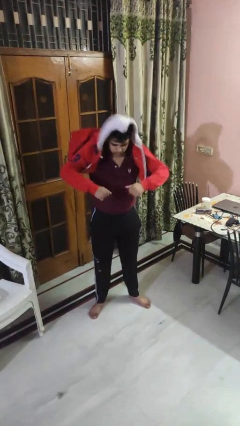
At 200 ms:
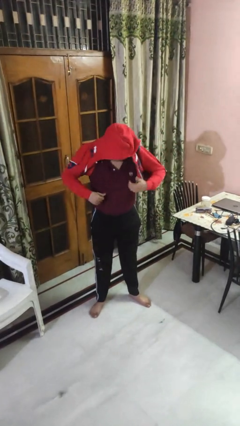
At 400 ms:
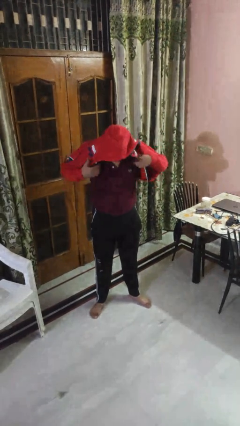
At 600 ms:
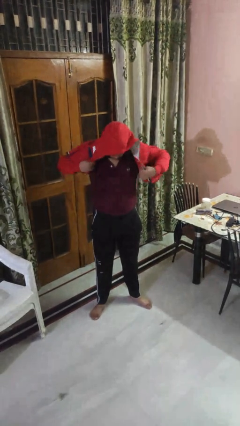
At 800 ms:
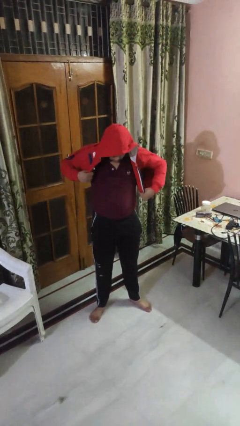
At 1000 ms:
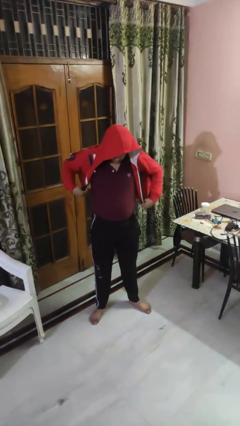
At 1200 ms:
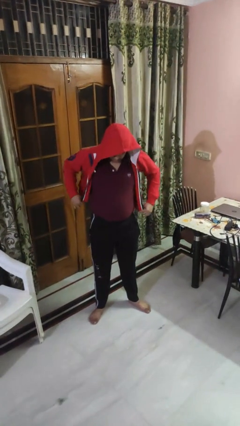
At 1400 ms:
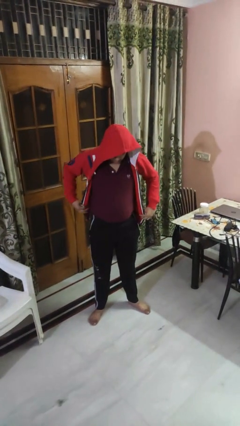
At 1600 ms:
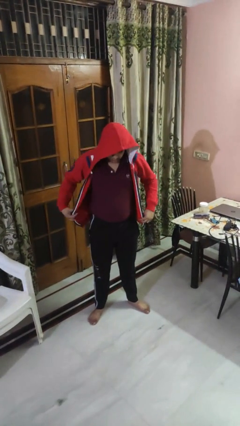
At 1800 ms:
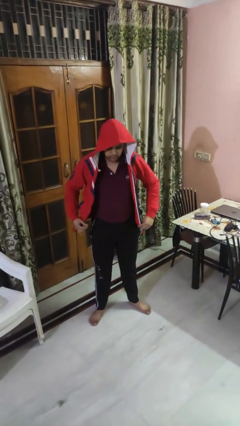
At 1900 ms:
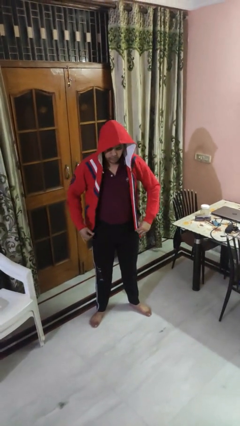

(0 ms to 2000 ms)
person puts on hoodie

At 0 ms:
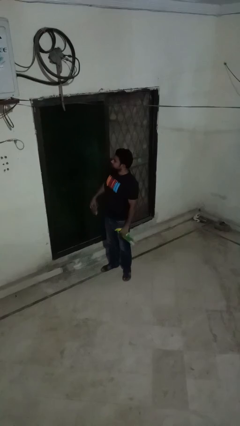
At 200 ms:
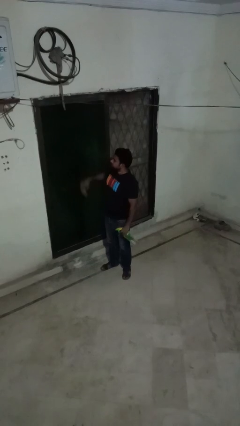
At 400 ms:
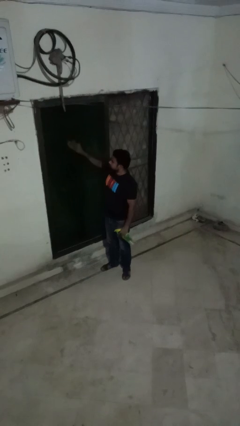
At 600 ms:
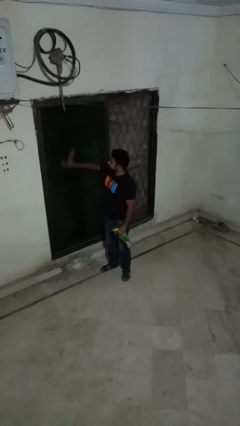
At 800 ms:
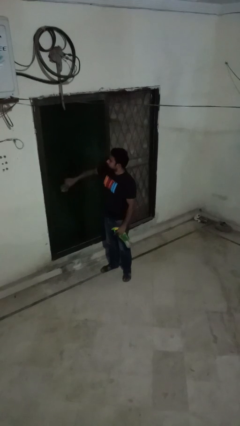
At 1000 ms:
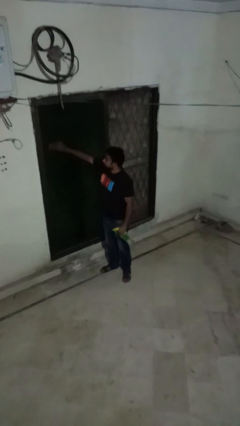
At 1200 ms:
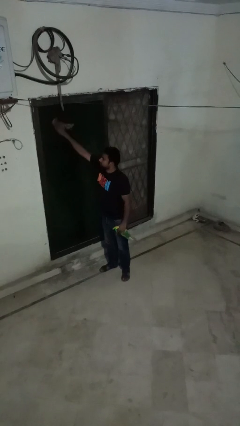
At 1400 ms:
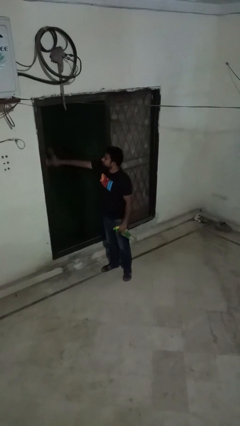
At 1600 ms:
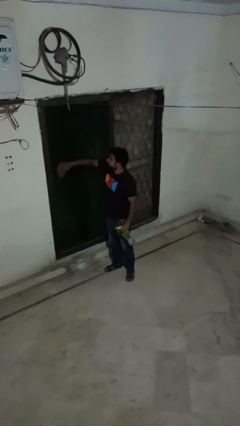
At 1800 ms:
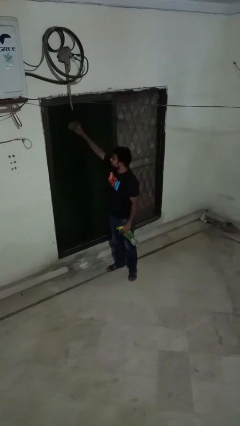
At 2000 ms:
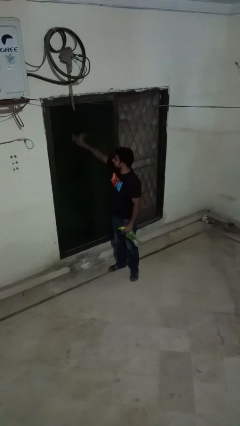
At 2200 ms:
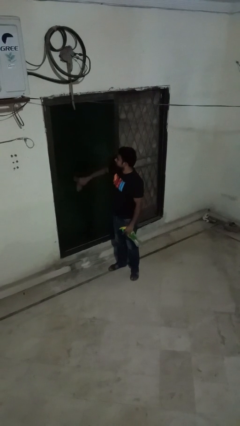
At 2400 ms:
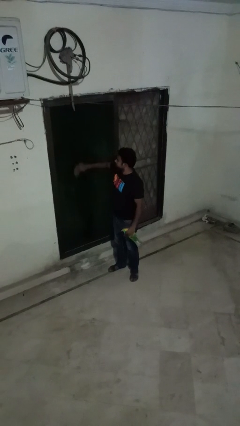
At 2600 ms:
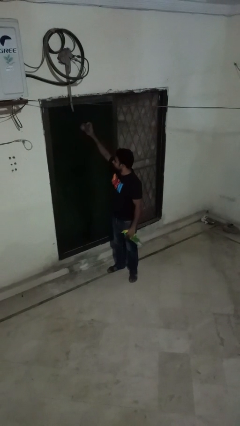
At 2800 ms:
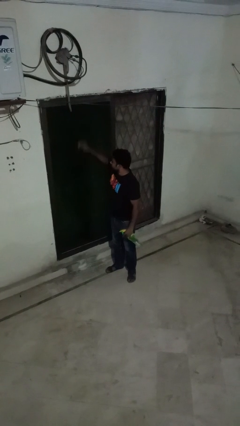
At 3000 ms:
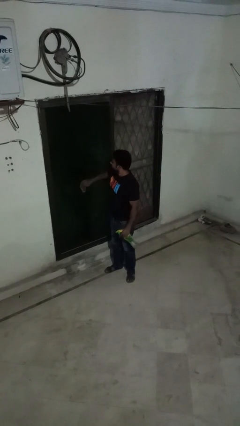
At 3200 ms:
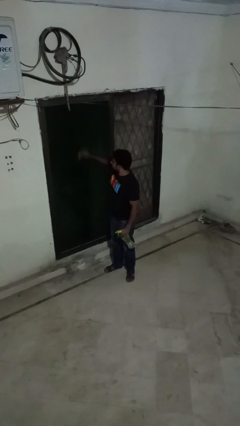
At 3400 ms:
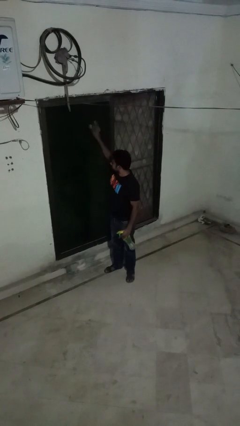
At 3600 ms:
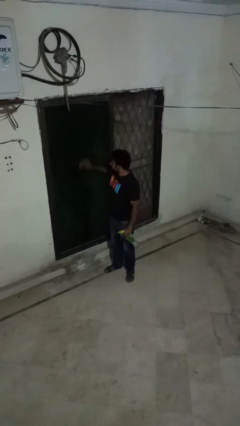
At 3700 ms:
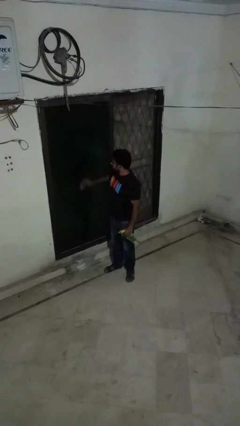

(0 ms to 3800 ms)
person washes window

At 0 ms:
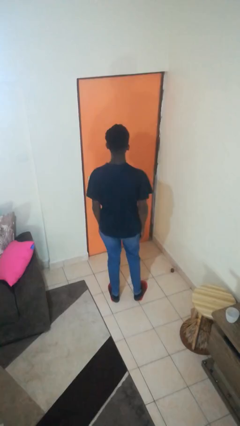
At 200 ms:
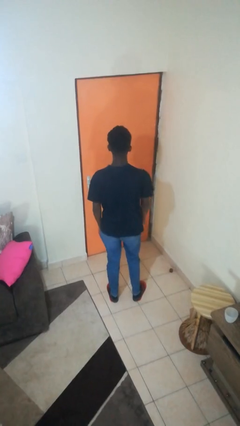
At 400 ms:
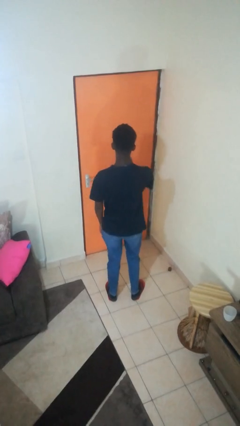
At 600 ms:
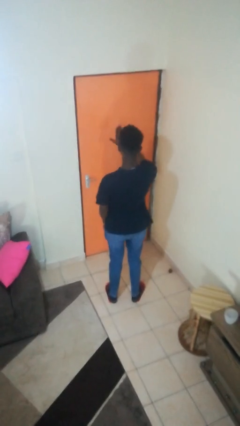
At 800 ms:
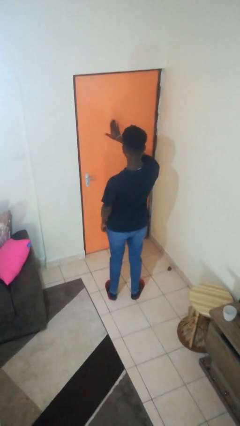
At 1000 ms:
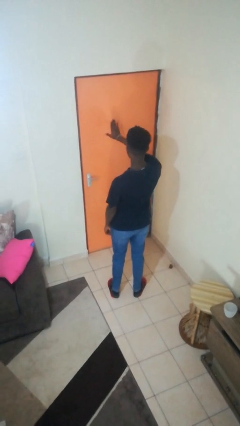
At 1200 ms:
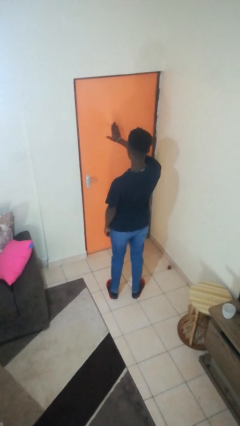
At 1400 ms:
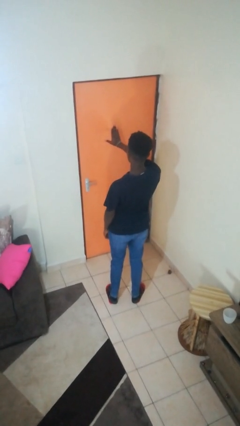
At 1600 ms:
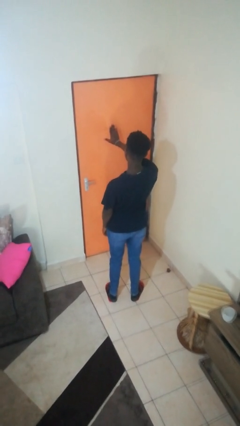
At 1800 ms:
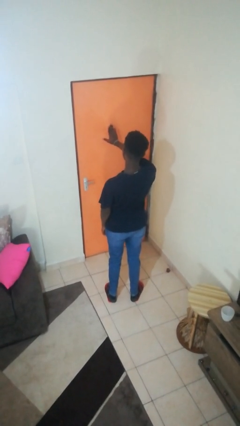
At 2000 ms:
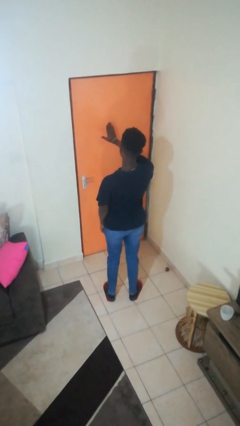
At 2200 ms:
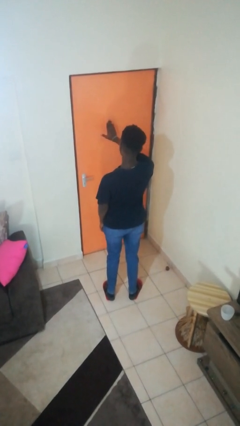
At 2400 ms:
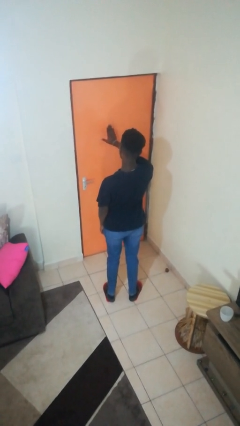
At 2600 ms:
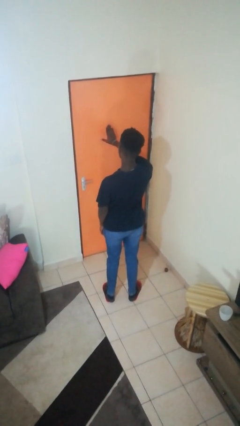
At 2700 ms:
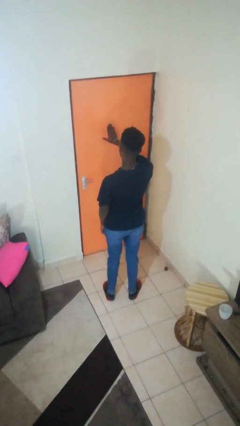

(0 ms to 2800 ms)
person gestures stop

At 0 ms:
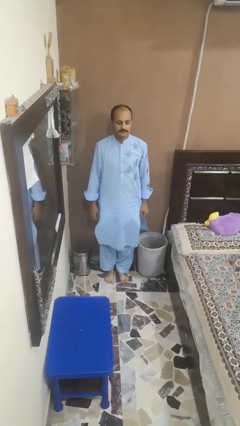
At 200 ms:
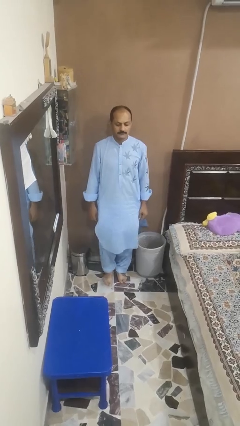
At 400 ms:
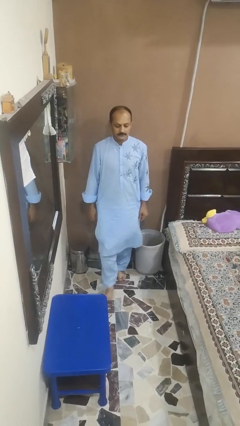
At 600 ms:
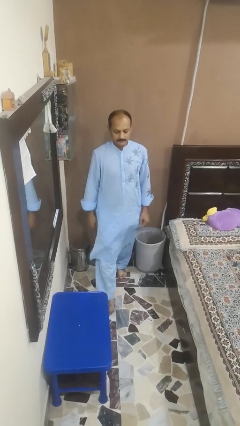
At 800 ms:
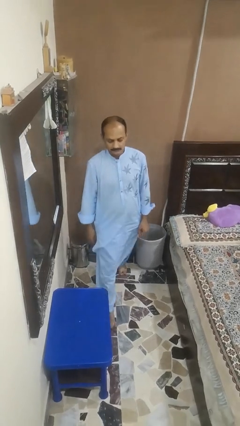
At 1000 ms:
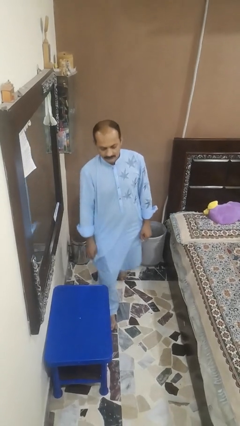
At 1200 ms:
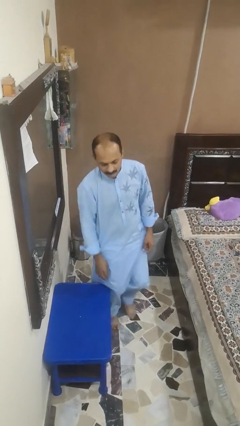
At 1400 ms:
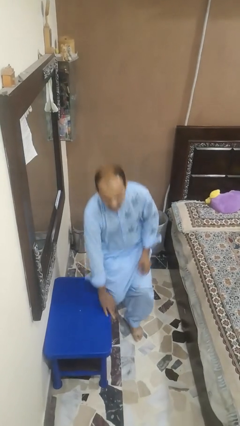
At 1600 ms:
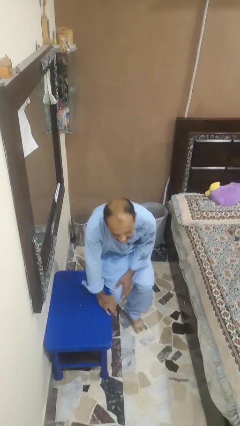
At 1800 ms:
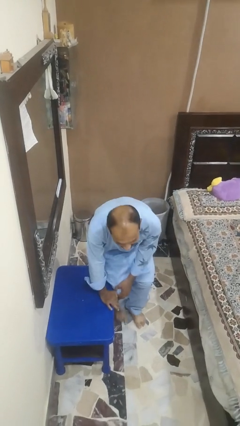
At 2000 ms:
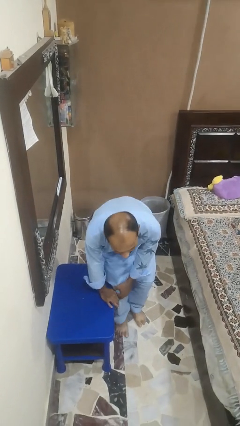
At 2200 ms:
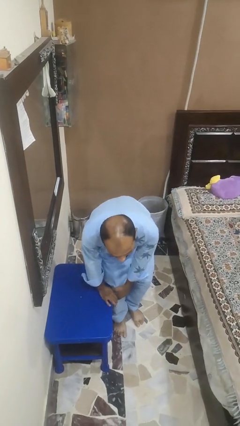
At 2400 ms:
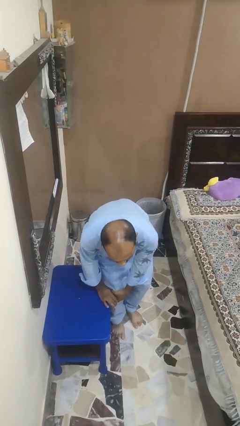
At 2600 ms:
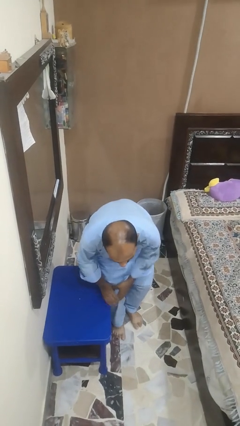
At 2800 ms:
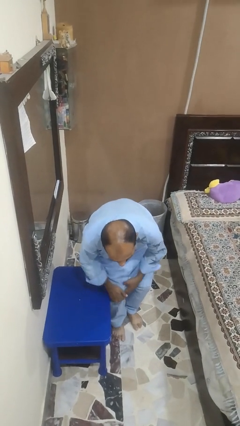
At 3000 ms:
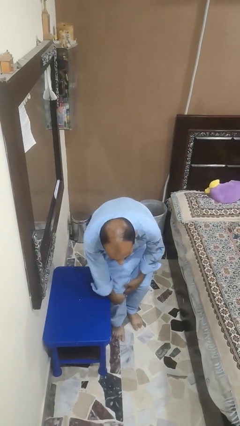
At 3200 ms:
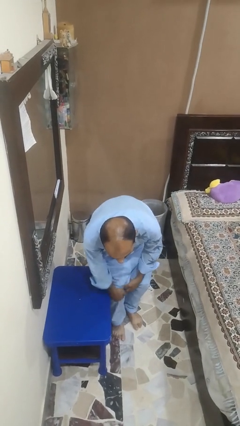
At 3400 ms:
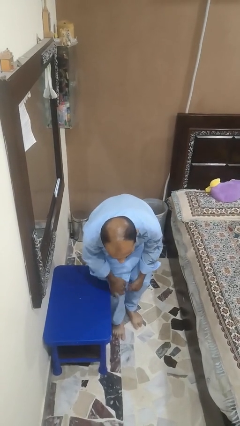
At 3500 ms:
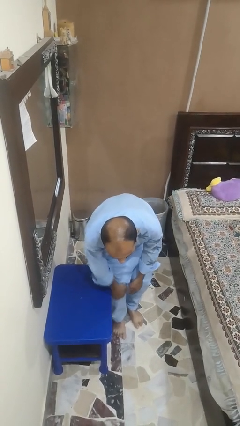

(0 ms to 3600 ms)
person bumps into table

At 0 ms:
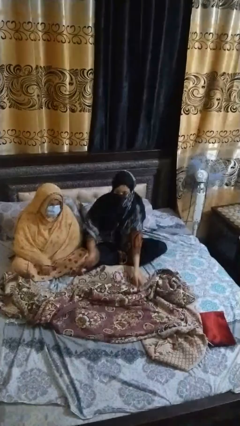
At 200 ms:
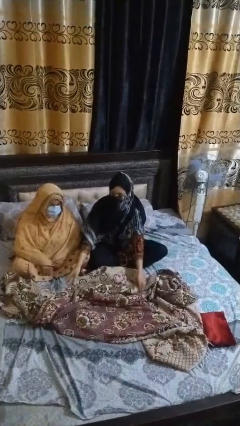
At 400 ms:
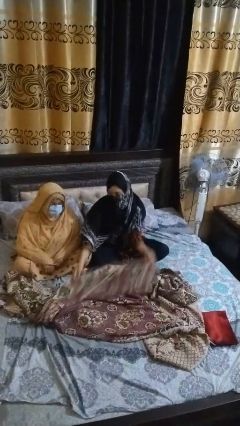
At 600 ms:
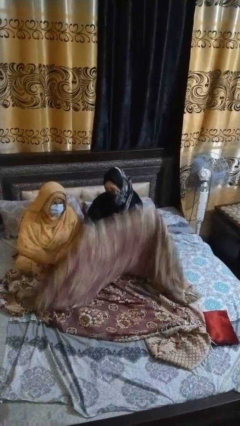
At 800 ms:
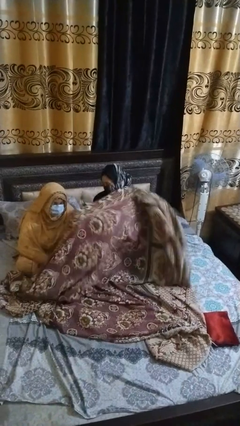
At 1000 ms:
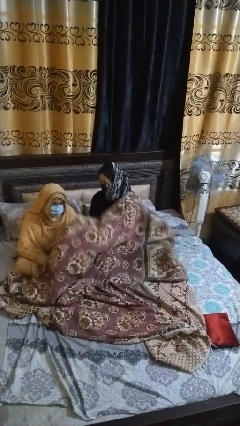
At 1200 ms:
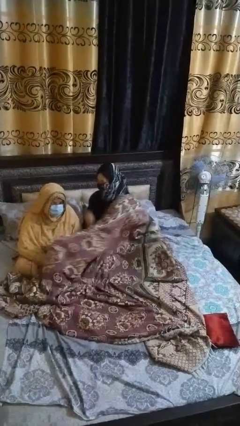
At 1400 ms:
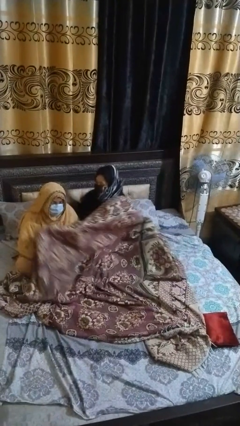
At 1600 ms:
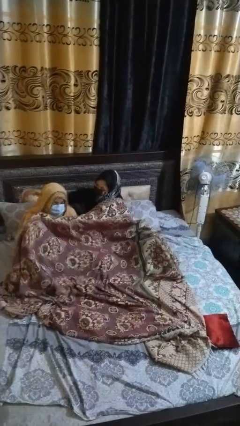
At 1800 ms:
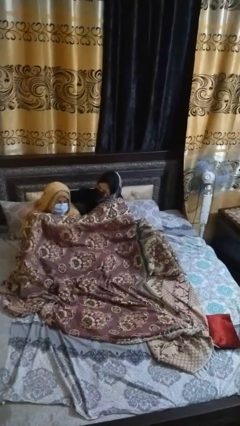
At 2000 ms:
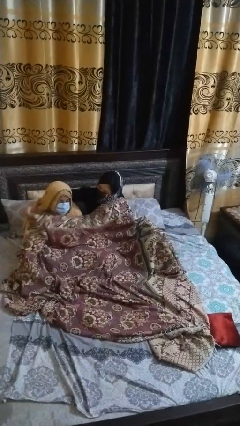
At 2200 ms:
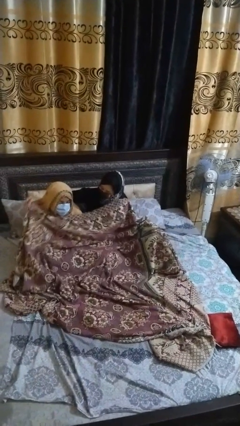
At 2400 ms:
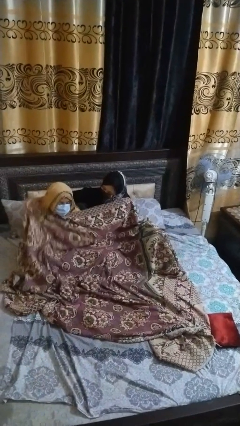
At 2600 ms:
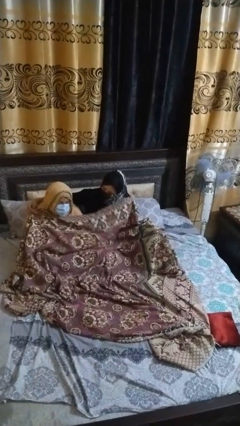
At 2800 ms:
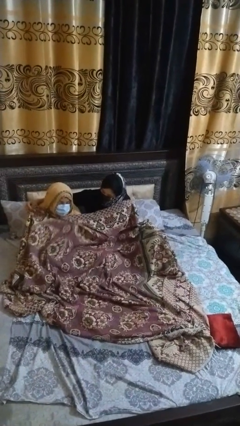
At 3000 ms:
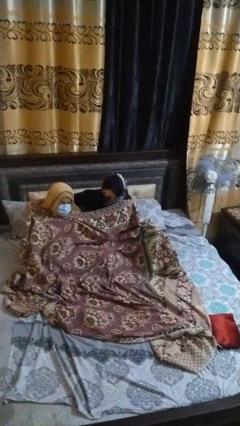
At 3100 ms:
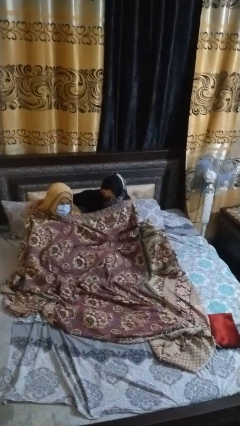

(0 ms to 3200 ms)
person covers friend with blanket

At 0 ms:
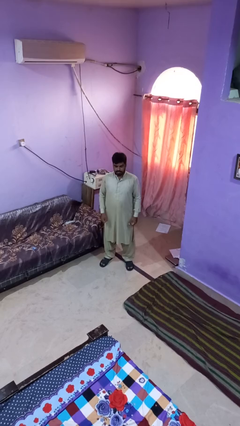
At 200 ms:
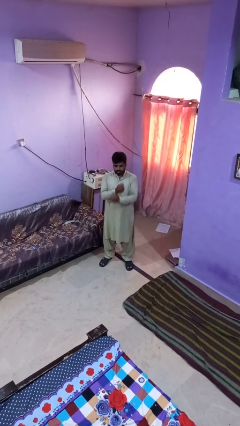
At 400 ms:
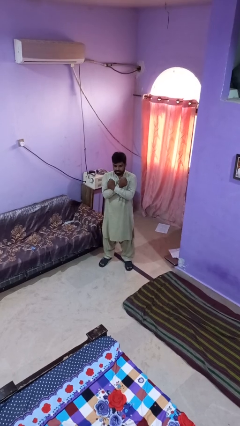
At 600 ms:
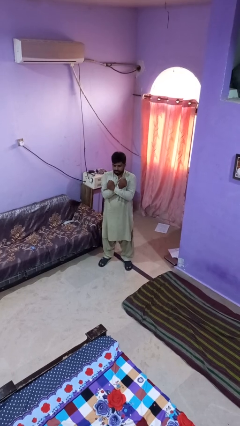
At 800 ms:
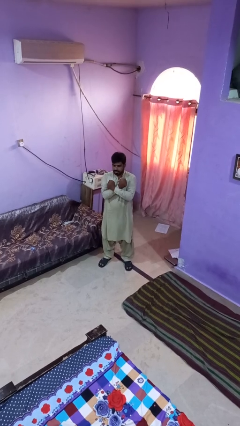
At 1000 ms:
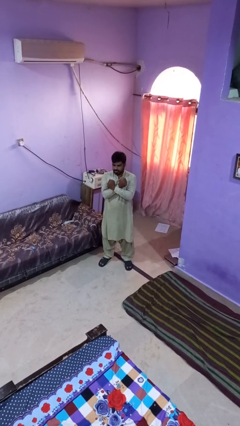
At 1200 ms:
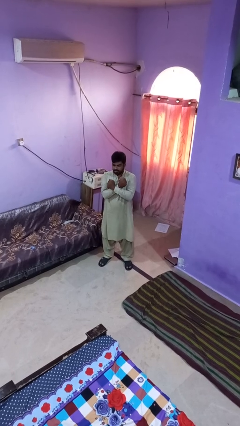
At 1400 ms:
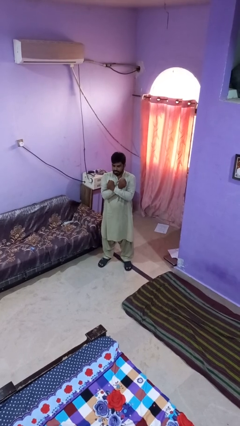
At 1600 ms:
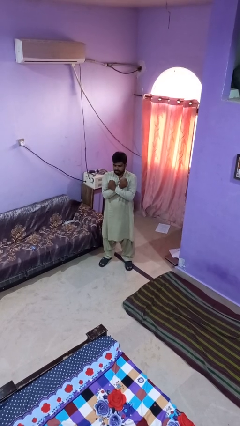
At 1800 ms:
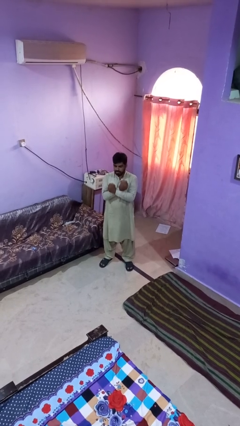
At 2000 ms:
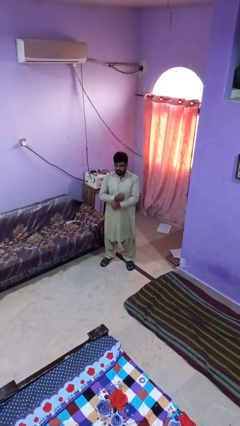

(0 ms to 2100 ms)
person gestures arms x
